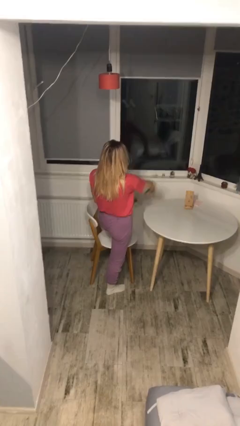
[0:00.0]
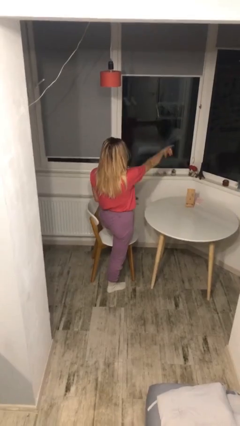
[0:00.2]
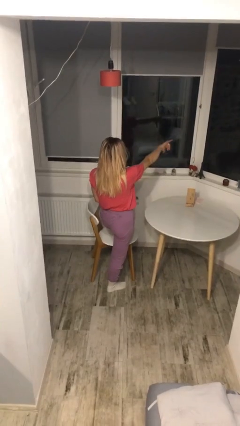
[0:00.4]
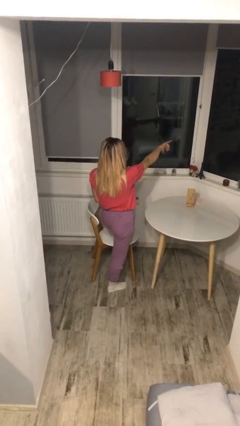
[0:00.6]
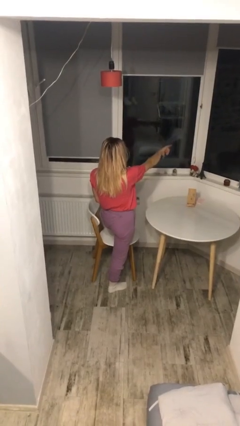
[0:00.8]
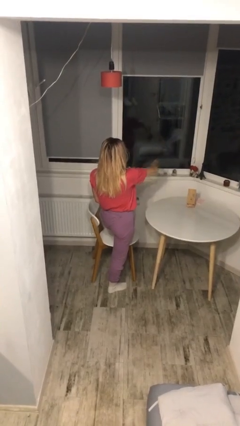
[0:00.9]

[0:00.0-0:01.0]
person gestures hang loose

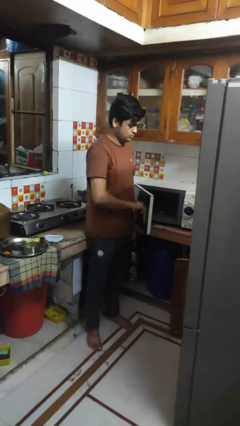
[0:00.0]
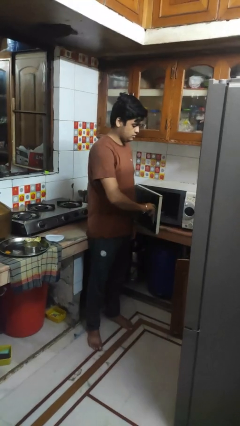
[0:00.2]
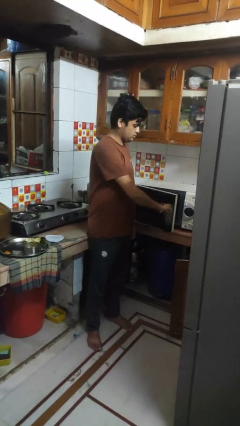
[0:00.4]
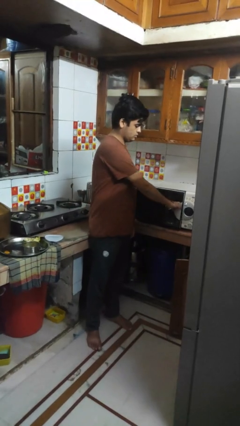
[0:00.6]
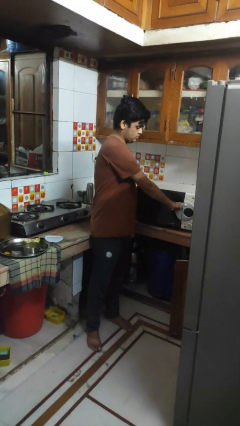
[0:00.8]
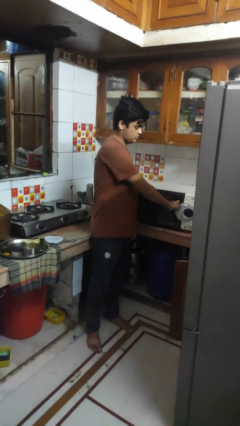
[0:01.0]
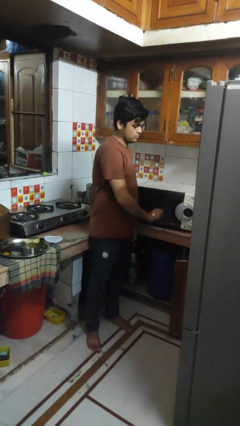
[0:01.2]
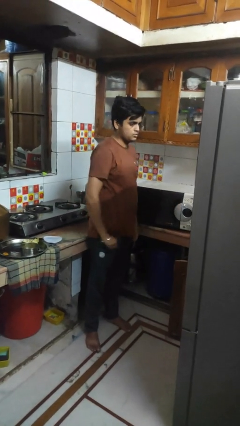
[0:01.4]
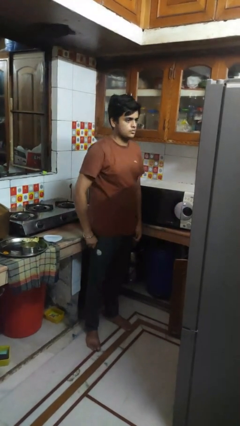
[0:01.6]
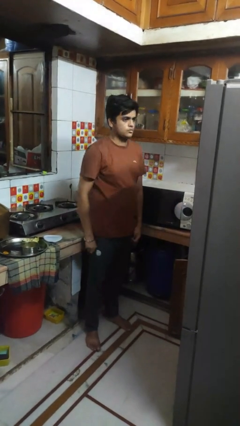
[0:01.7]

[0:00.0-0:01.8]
person closes oven door

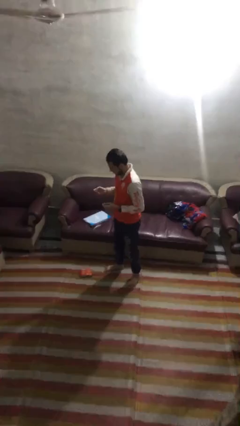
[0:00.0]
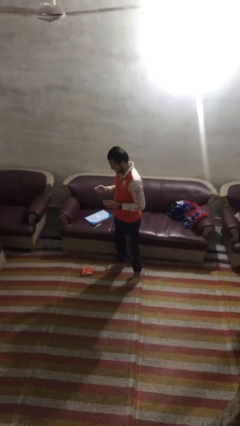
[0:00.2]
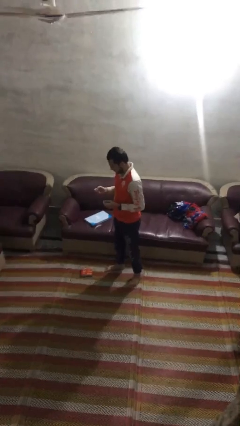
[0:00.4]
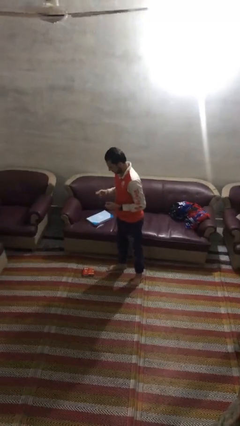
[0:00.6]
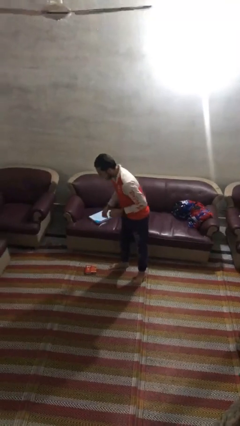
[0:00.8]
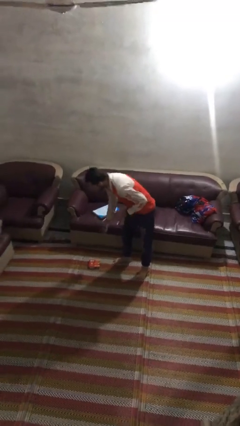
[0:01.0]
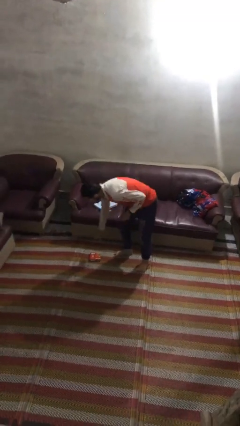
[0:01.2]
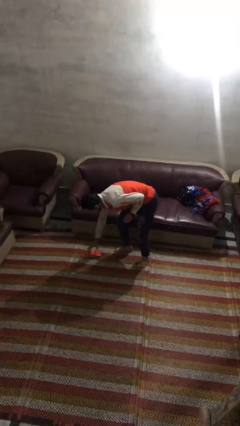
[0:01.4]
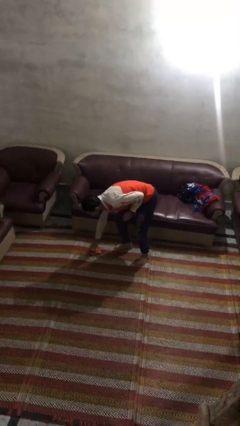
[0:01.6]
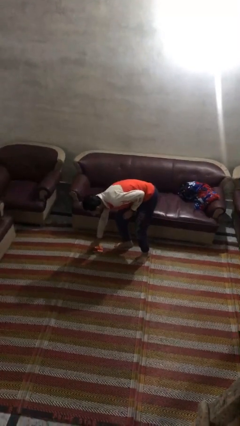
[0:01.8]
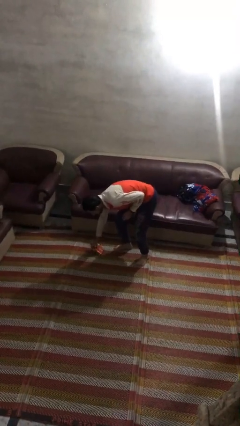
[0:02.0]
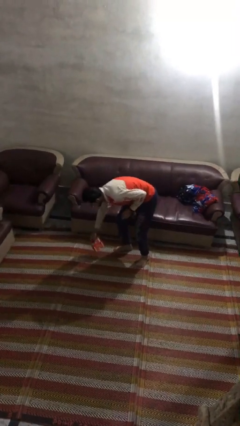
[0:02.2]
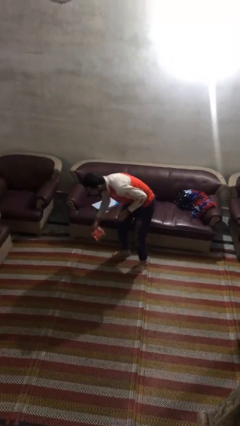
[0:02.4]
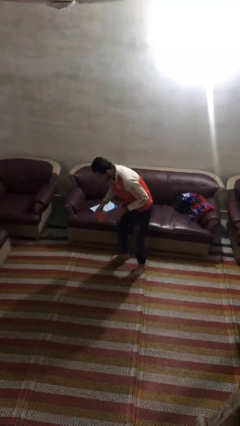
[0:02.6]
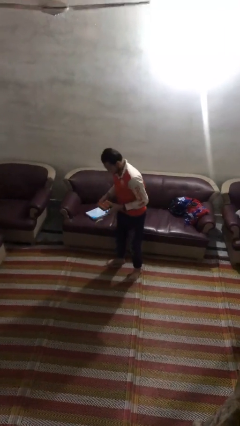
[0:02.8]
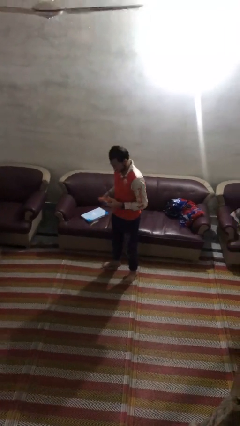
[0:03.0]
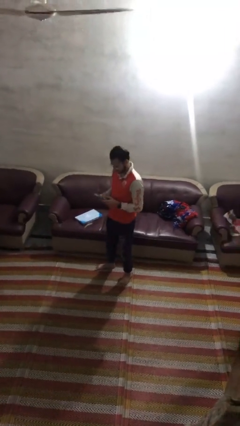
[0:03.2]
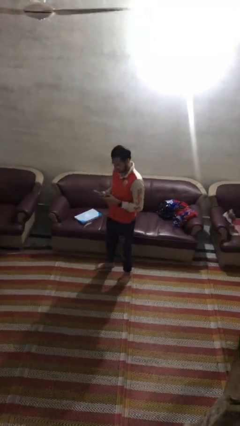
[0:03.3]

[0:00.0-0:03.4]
person picks up object from floor

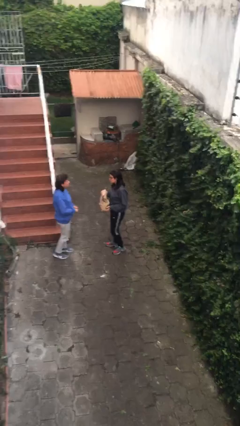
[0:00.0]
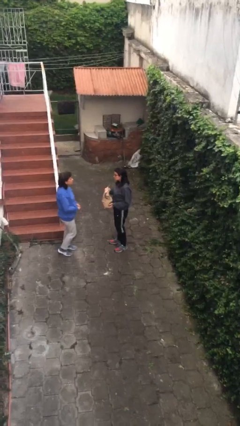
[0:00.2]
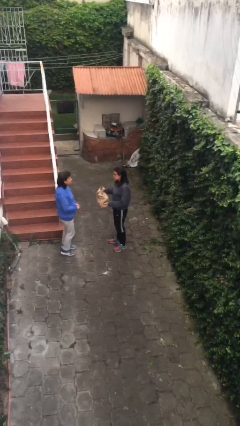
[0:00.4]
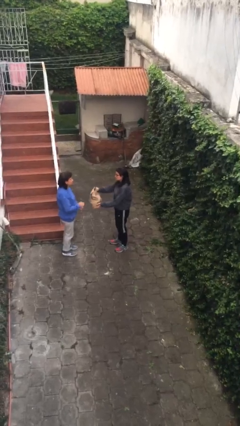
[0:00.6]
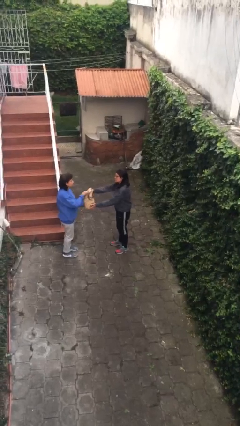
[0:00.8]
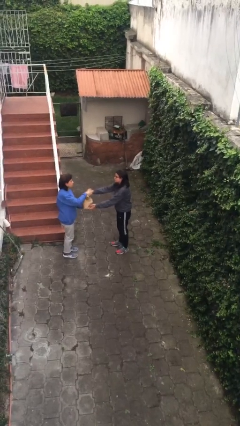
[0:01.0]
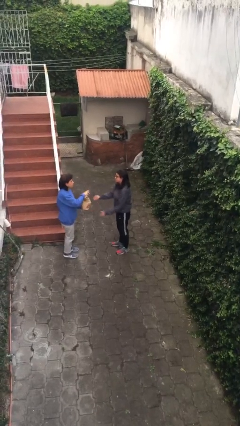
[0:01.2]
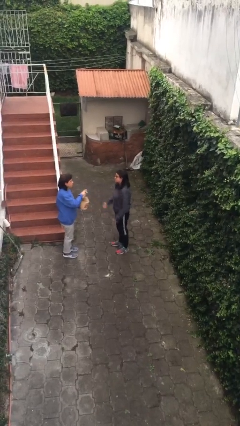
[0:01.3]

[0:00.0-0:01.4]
person transfers object to person

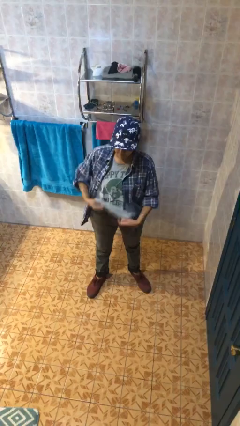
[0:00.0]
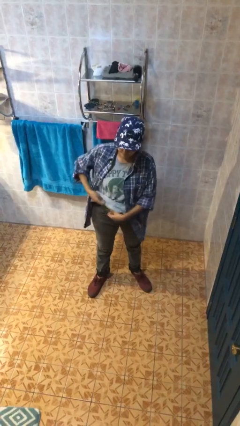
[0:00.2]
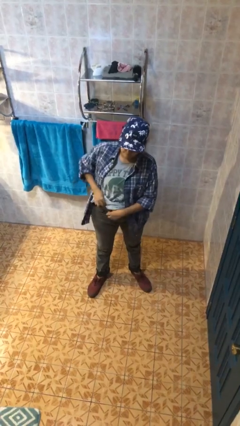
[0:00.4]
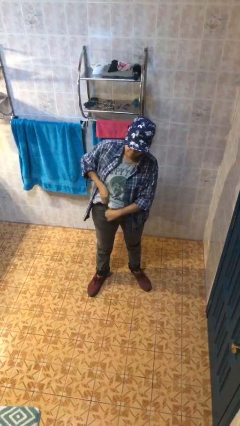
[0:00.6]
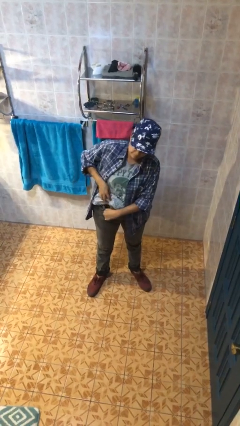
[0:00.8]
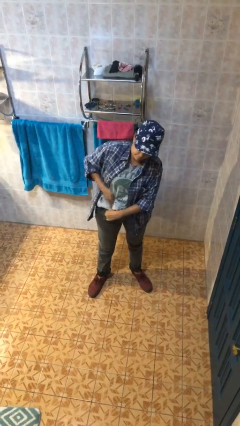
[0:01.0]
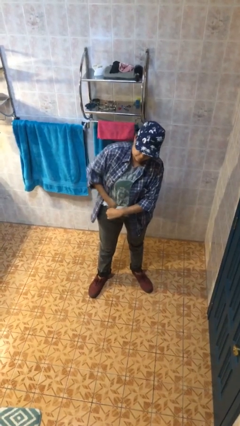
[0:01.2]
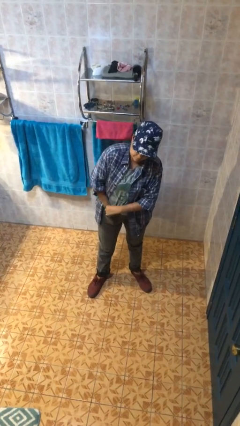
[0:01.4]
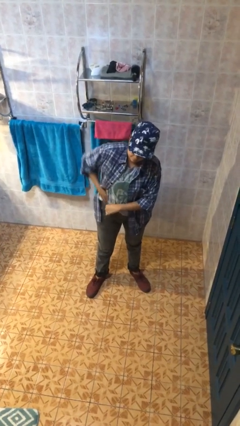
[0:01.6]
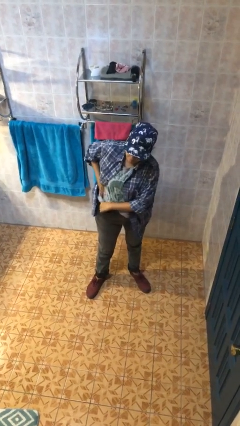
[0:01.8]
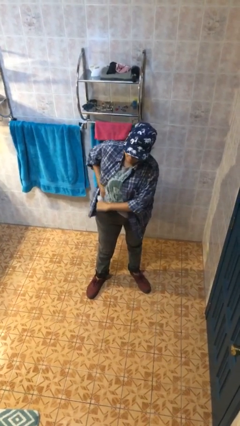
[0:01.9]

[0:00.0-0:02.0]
person tucks in shirt

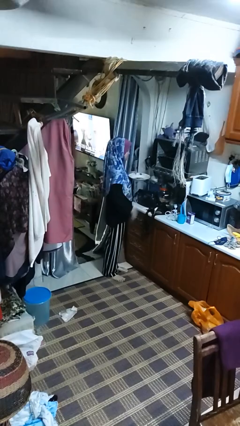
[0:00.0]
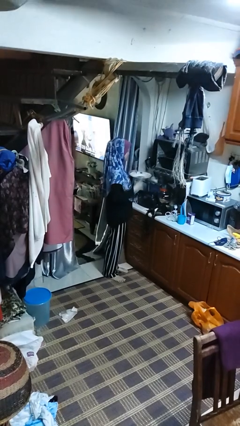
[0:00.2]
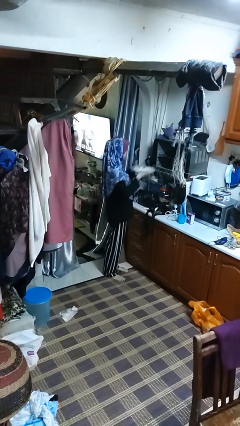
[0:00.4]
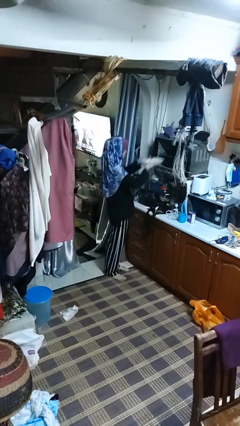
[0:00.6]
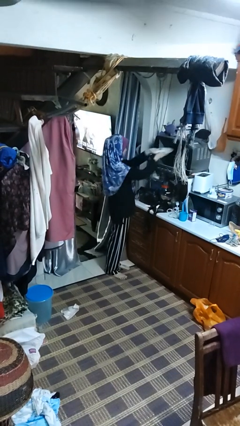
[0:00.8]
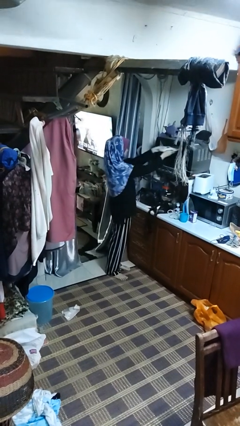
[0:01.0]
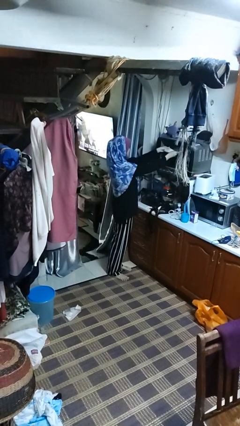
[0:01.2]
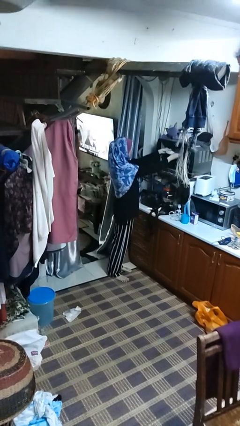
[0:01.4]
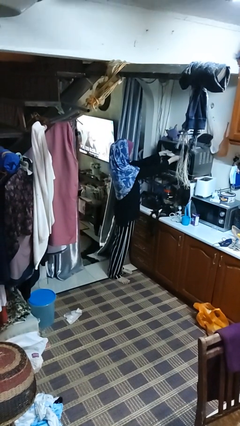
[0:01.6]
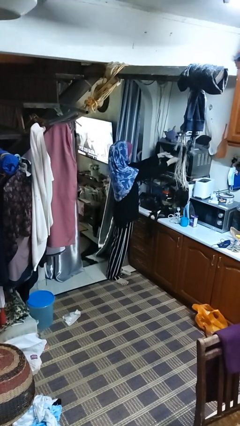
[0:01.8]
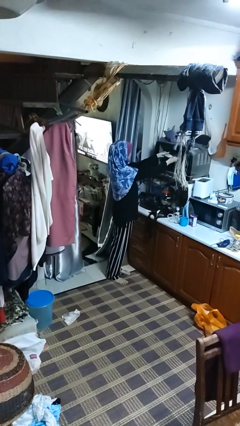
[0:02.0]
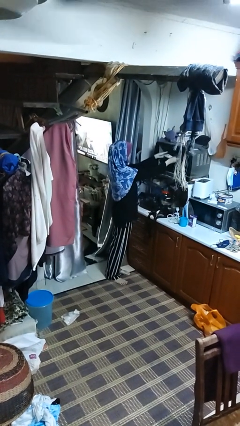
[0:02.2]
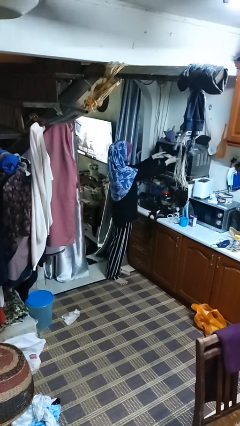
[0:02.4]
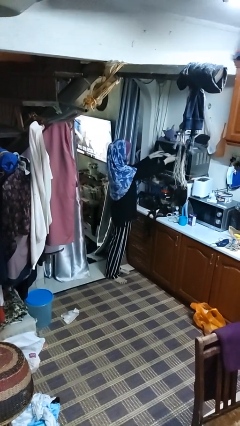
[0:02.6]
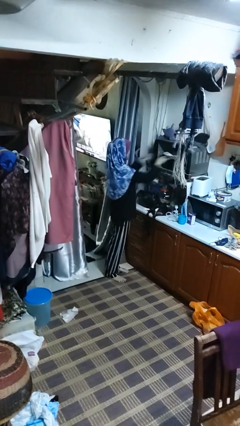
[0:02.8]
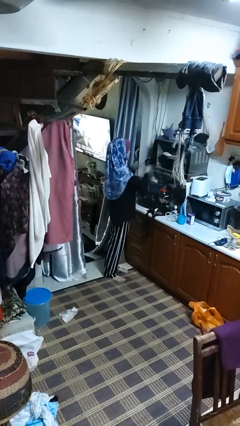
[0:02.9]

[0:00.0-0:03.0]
person puts object into oven

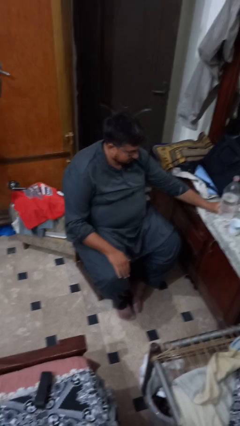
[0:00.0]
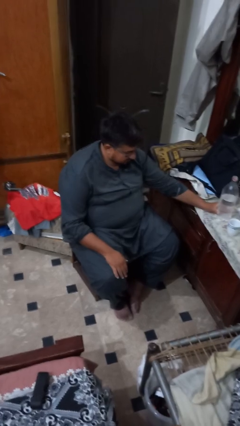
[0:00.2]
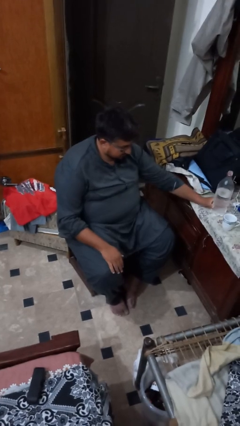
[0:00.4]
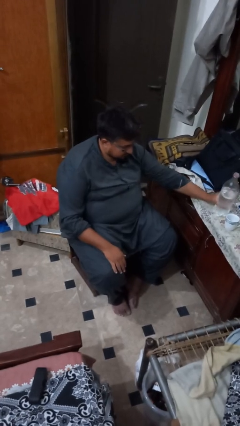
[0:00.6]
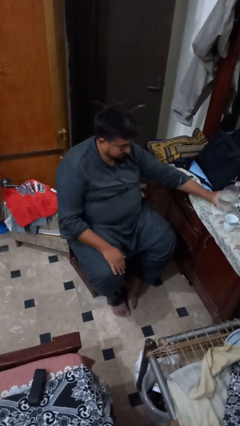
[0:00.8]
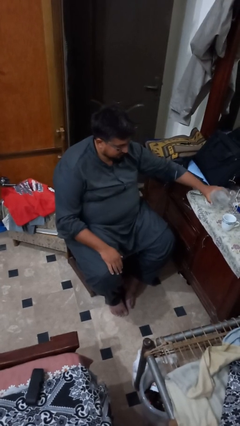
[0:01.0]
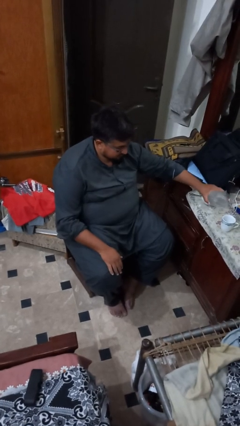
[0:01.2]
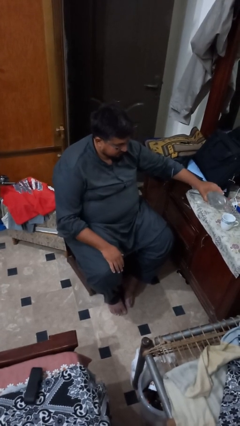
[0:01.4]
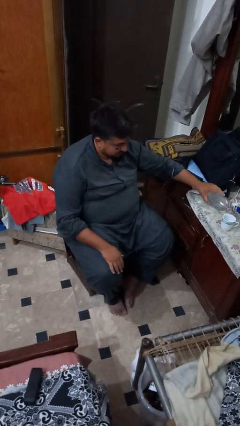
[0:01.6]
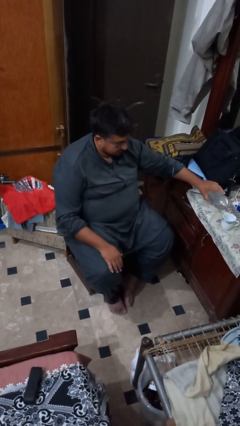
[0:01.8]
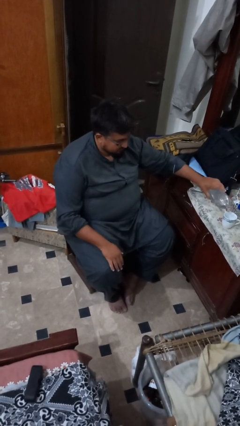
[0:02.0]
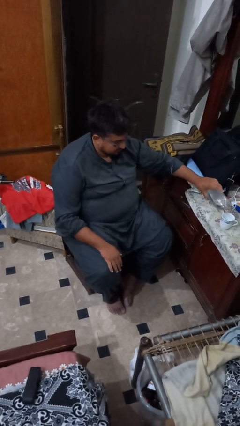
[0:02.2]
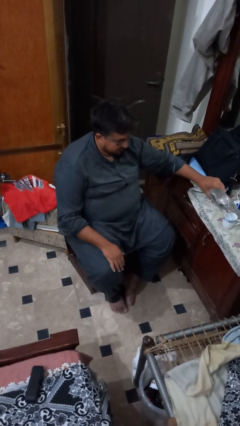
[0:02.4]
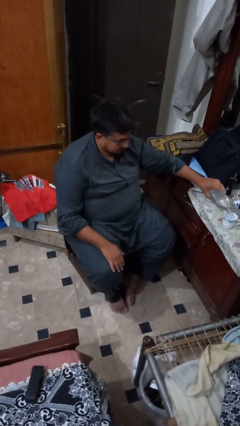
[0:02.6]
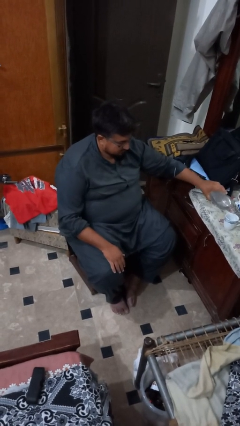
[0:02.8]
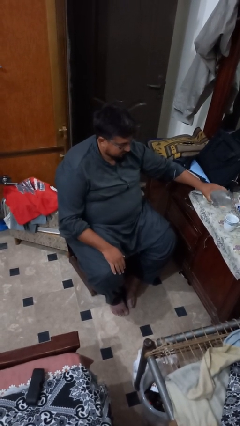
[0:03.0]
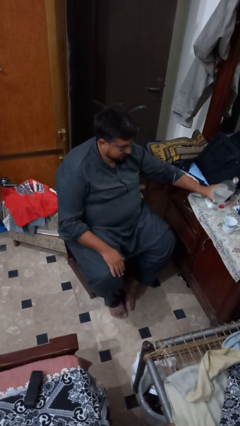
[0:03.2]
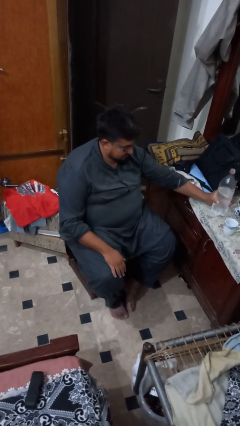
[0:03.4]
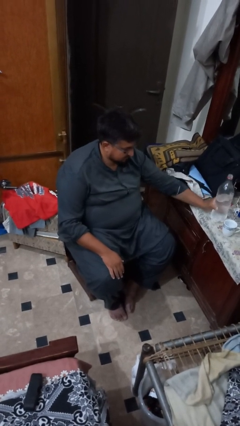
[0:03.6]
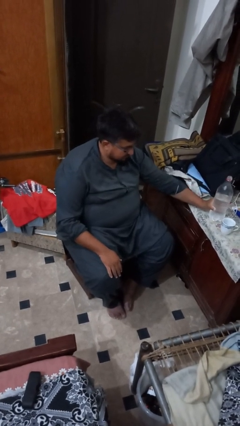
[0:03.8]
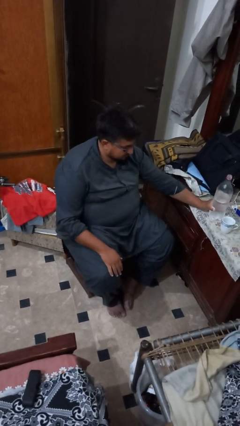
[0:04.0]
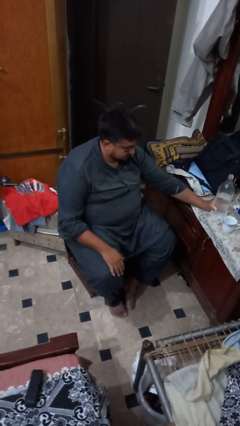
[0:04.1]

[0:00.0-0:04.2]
person pours liquid into cup

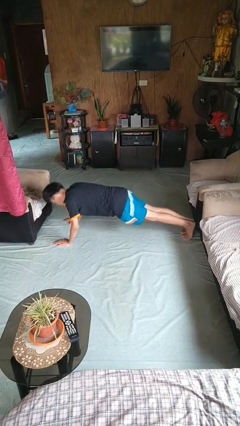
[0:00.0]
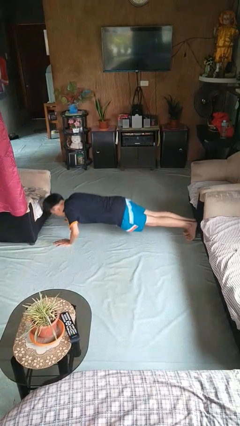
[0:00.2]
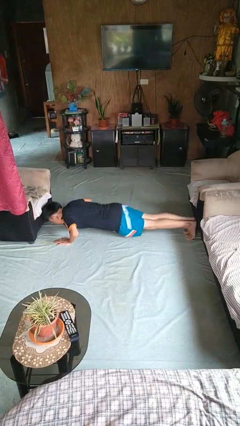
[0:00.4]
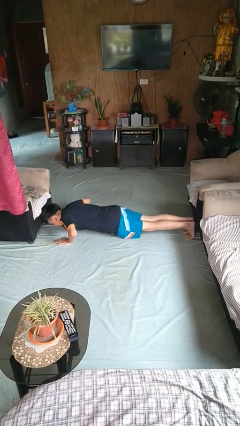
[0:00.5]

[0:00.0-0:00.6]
person exercises with pushup
